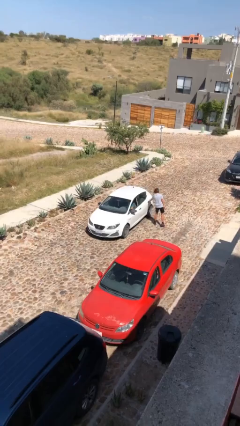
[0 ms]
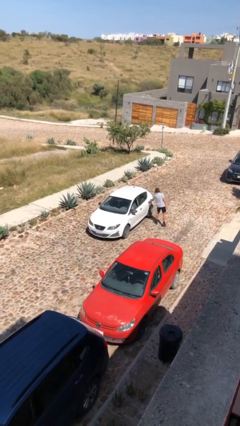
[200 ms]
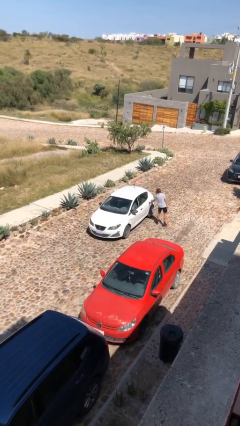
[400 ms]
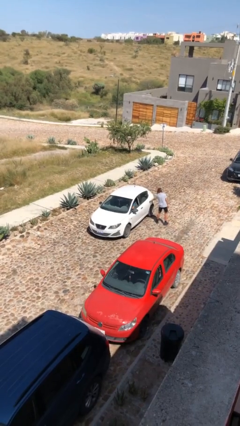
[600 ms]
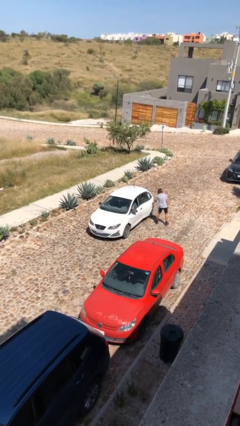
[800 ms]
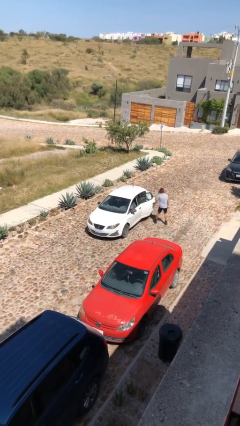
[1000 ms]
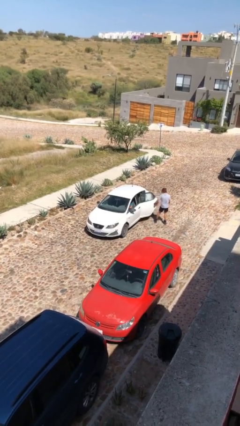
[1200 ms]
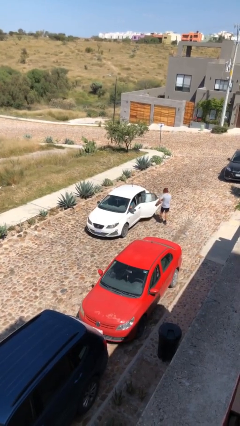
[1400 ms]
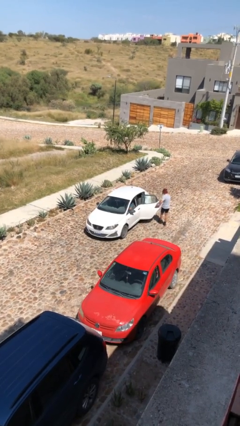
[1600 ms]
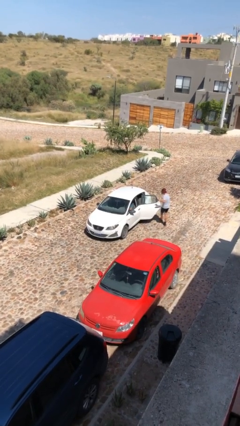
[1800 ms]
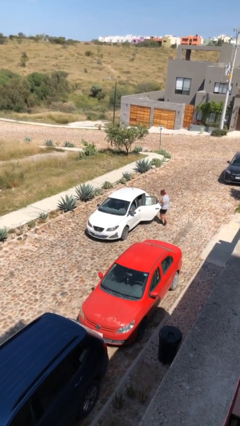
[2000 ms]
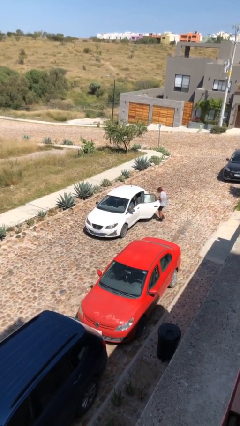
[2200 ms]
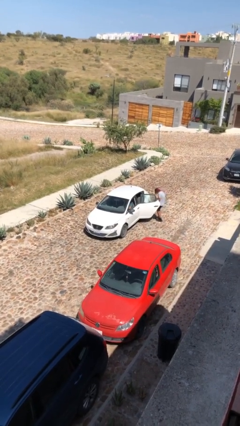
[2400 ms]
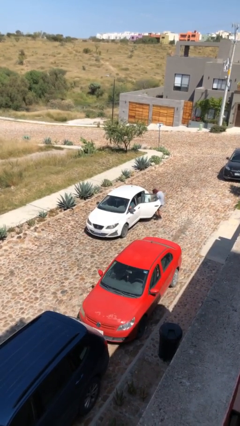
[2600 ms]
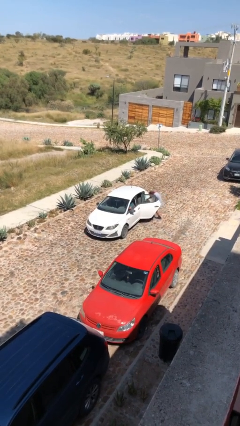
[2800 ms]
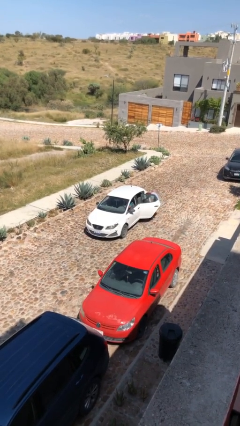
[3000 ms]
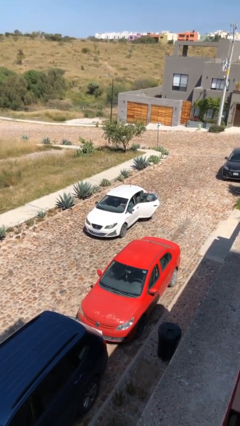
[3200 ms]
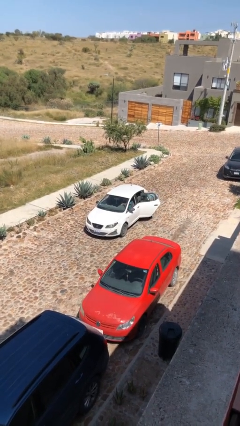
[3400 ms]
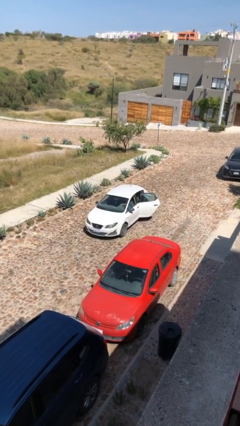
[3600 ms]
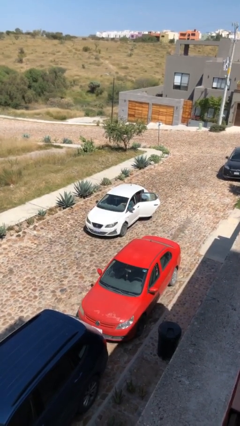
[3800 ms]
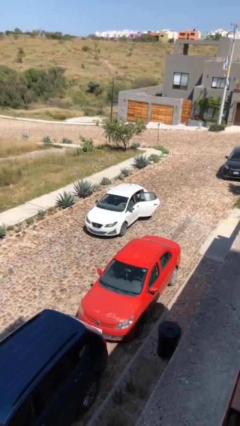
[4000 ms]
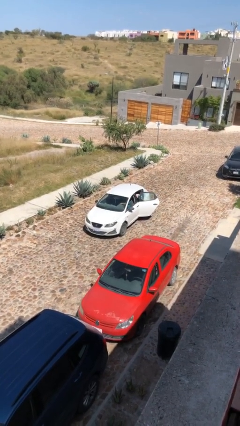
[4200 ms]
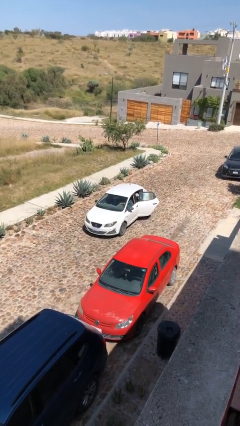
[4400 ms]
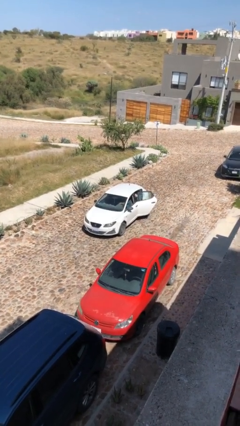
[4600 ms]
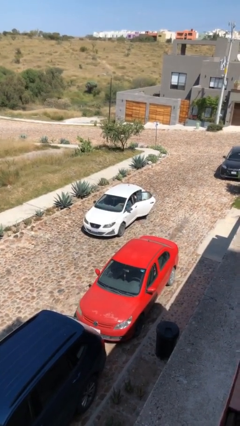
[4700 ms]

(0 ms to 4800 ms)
car picks up person

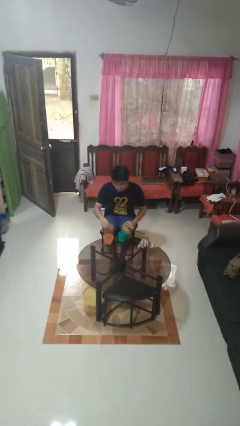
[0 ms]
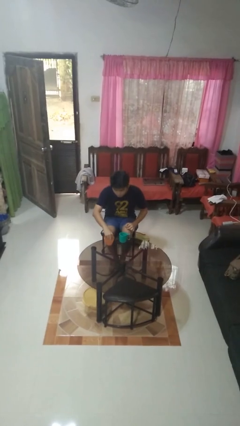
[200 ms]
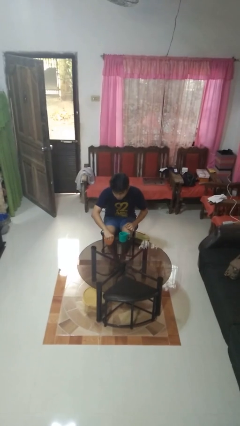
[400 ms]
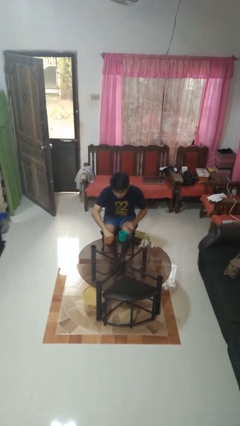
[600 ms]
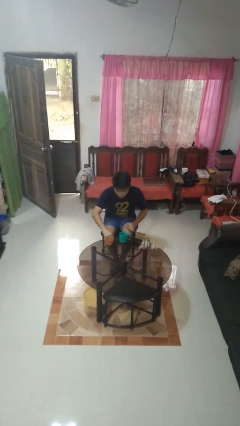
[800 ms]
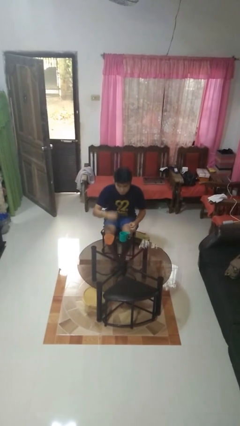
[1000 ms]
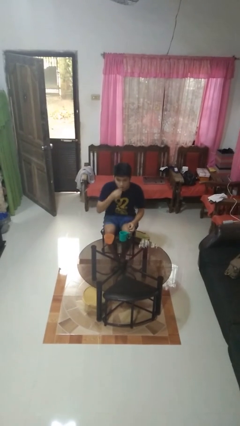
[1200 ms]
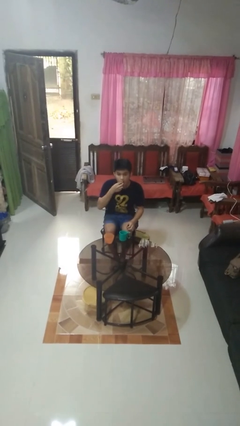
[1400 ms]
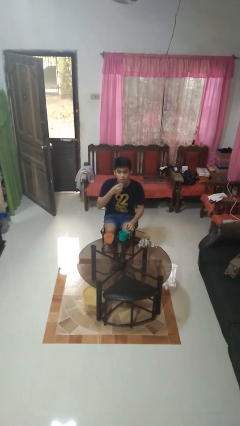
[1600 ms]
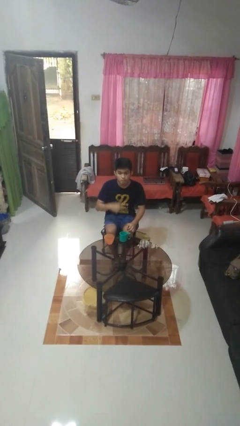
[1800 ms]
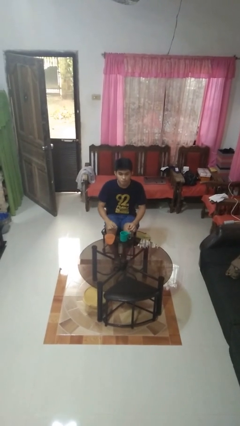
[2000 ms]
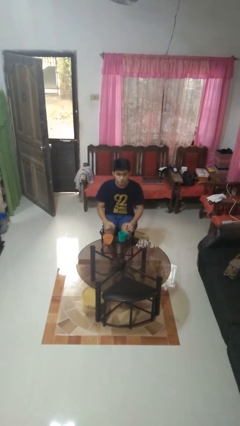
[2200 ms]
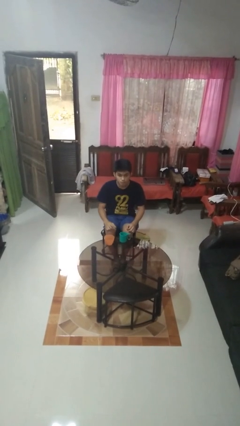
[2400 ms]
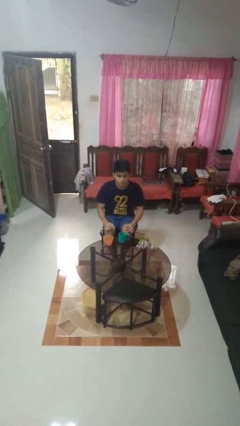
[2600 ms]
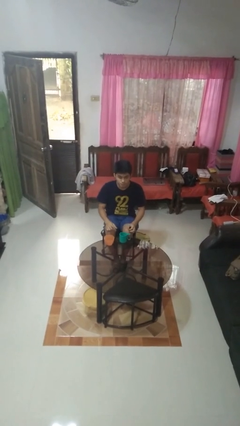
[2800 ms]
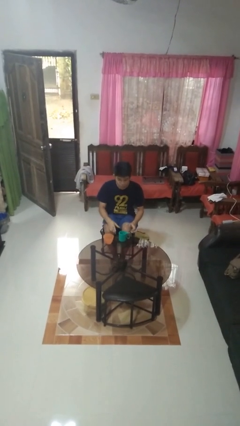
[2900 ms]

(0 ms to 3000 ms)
person takes medicine pills

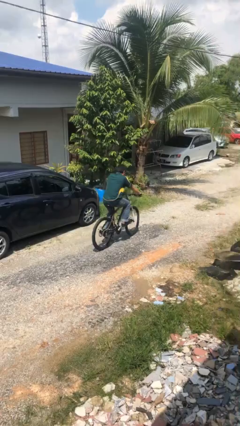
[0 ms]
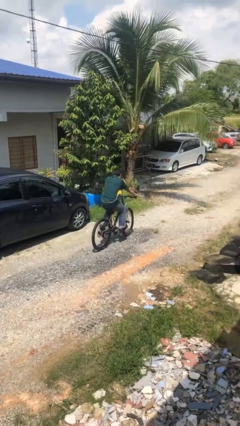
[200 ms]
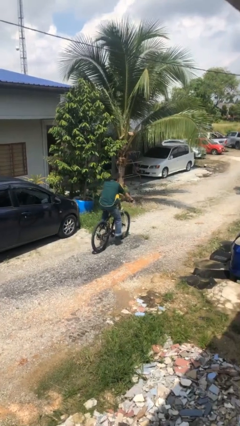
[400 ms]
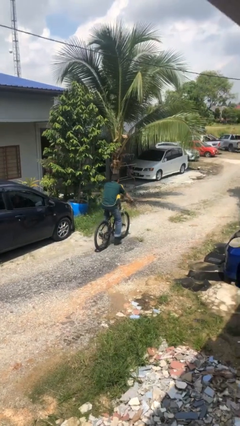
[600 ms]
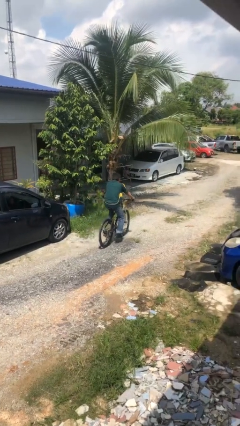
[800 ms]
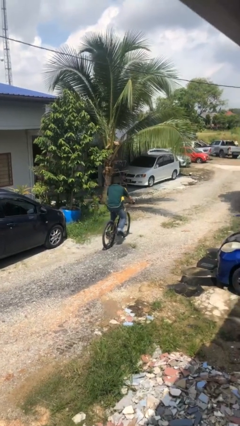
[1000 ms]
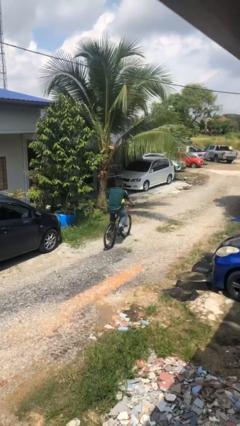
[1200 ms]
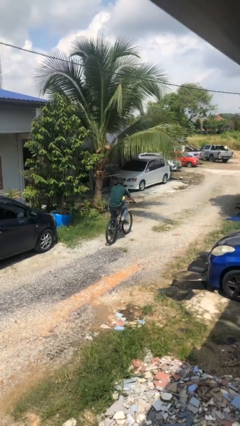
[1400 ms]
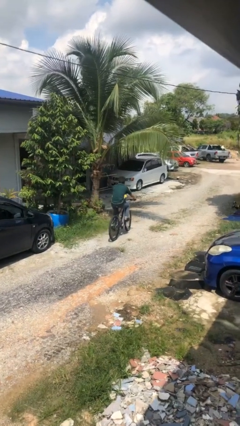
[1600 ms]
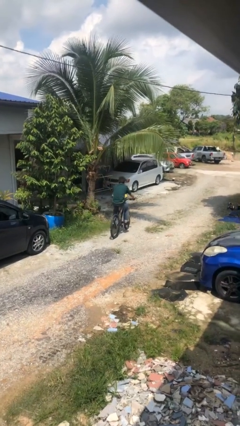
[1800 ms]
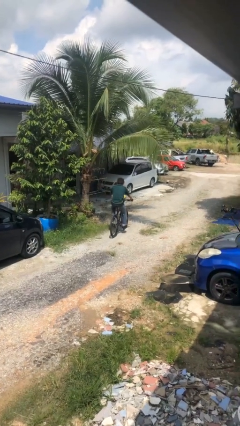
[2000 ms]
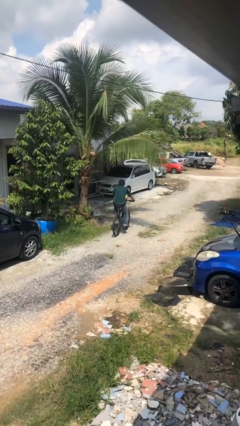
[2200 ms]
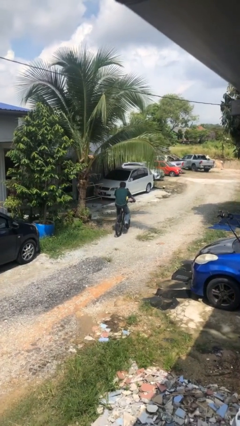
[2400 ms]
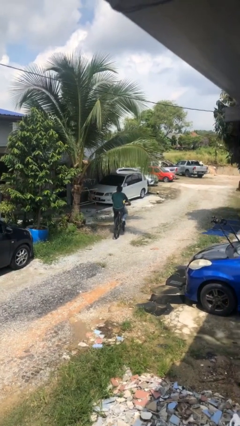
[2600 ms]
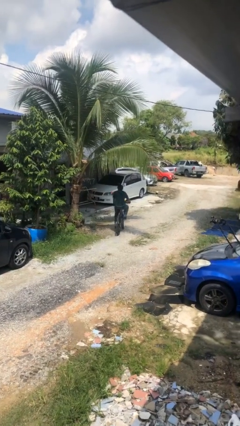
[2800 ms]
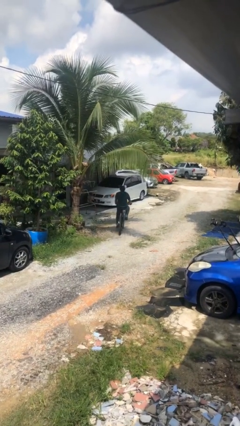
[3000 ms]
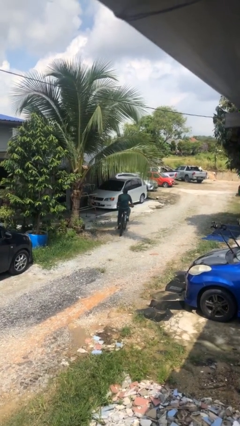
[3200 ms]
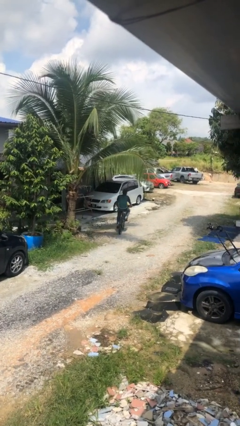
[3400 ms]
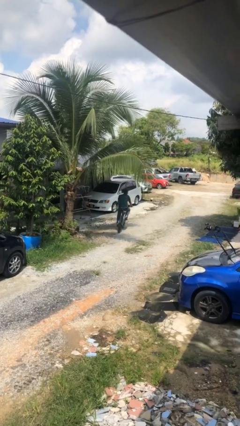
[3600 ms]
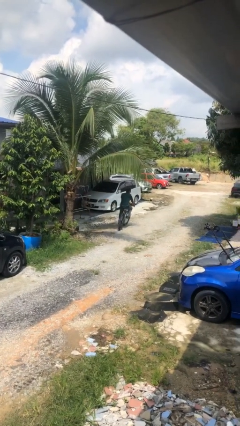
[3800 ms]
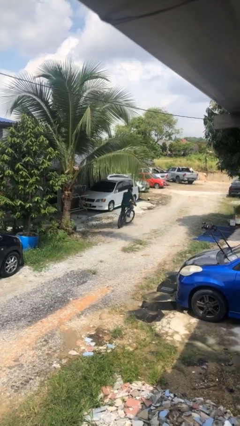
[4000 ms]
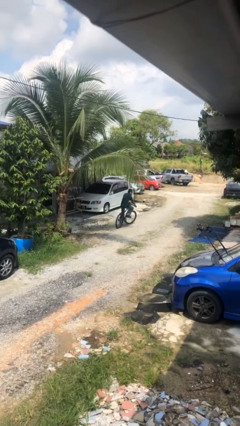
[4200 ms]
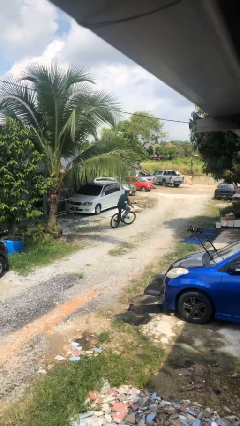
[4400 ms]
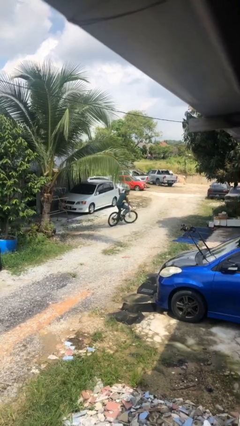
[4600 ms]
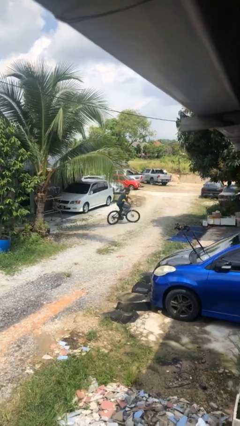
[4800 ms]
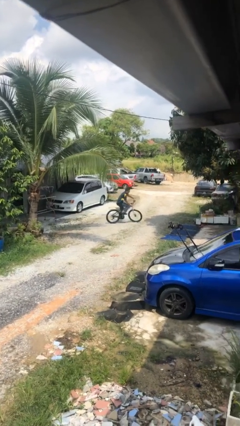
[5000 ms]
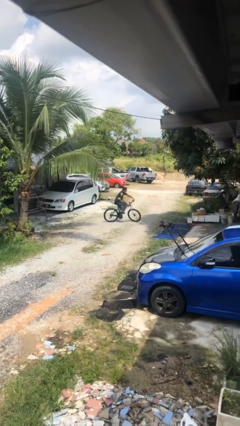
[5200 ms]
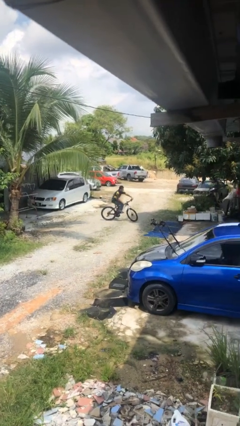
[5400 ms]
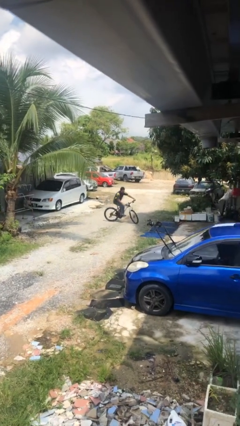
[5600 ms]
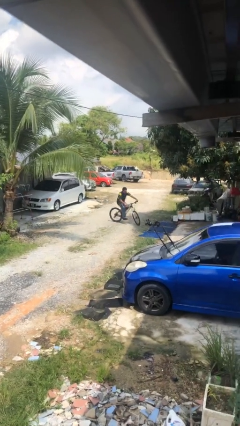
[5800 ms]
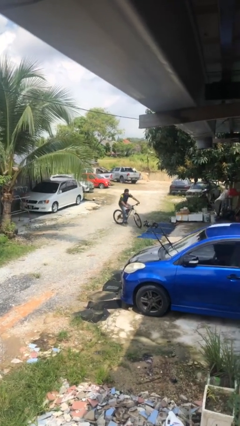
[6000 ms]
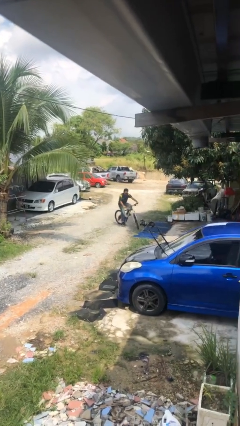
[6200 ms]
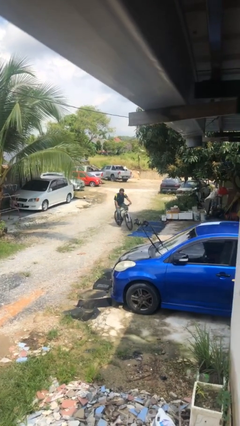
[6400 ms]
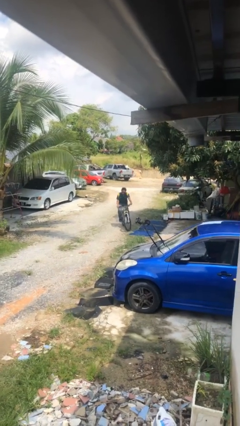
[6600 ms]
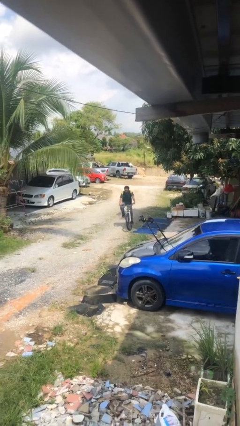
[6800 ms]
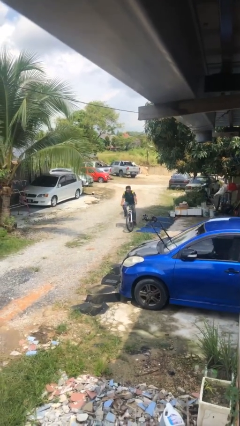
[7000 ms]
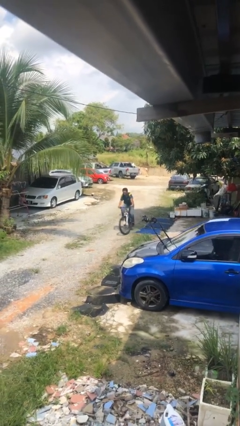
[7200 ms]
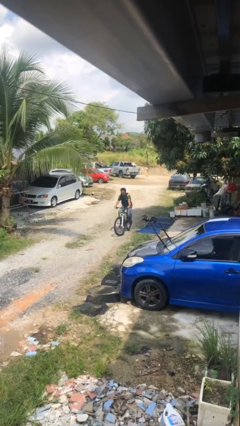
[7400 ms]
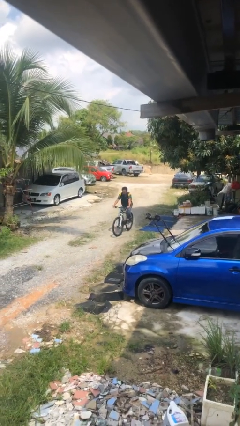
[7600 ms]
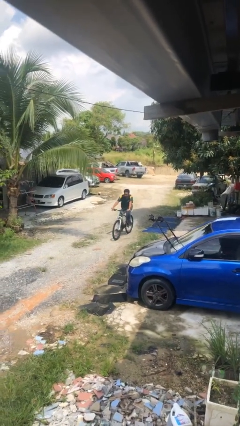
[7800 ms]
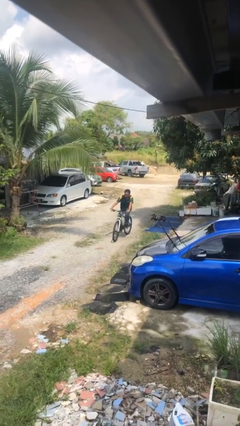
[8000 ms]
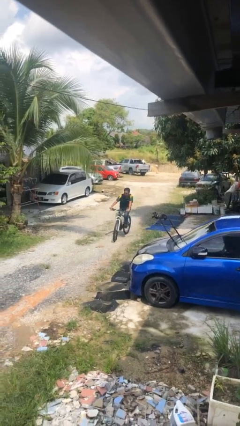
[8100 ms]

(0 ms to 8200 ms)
person rides bicycle

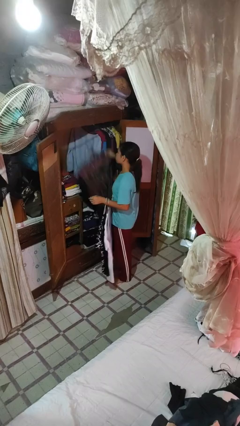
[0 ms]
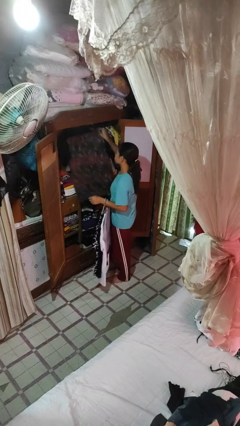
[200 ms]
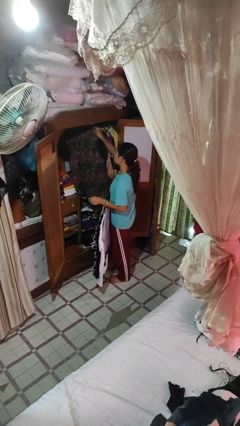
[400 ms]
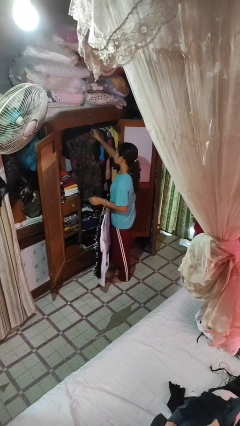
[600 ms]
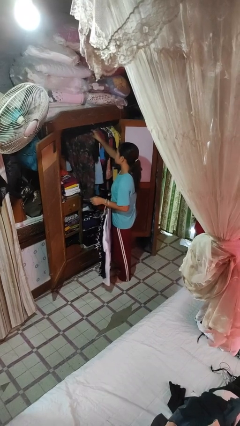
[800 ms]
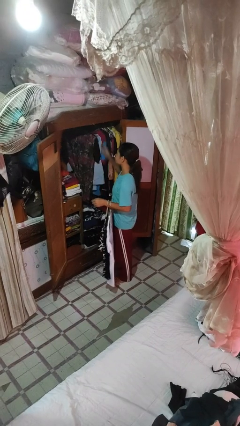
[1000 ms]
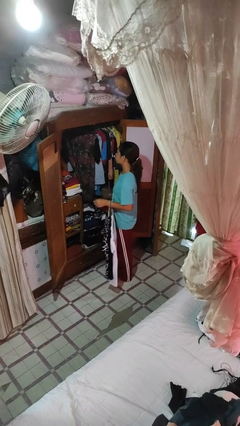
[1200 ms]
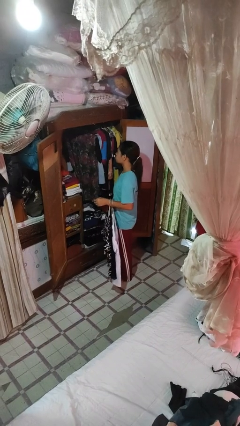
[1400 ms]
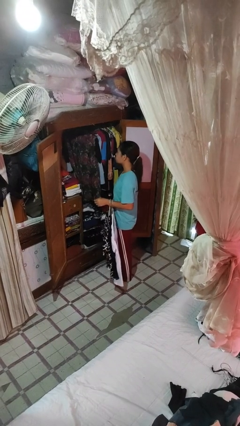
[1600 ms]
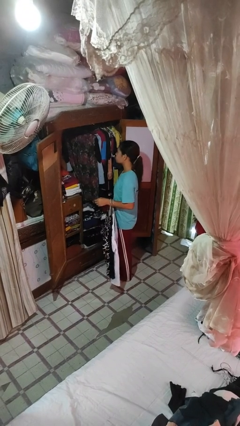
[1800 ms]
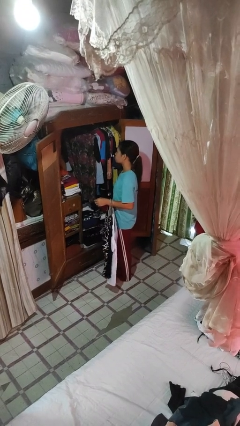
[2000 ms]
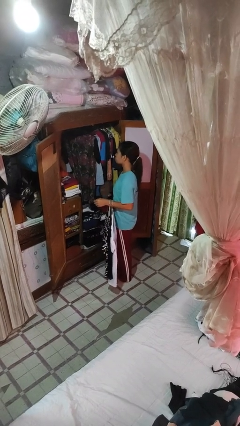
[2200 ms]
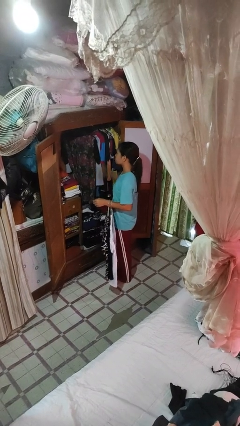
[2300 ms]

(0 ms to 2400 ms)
person puts clothes into closet
